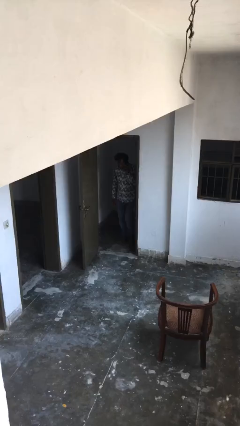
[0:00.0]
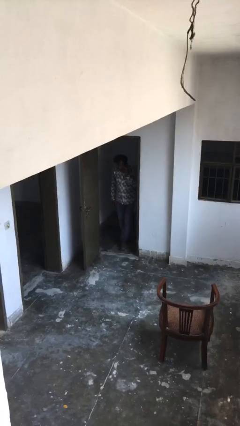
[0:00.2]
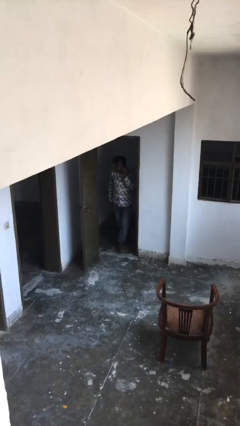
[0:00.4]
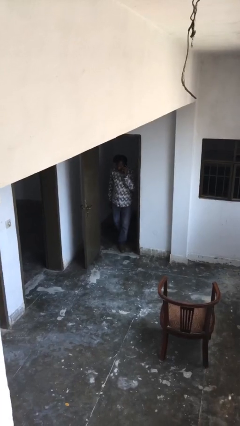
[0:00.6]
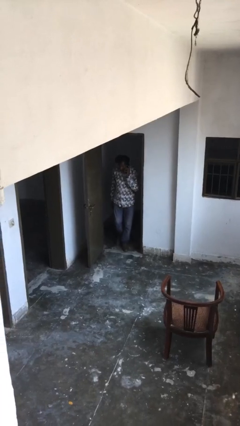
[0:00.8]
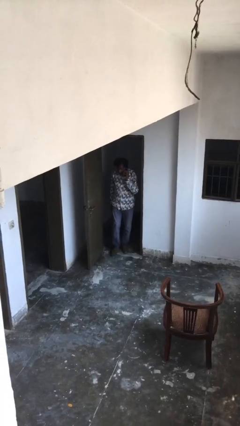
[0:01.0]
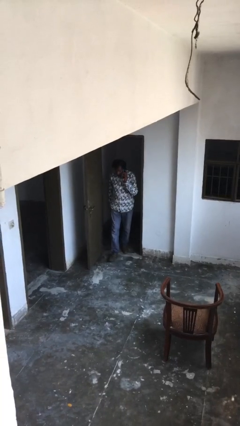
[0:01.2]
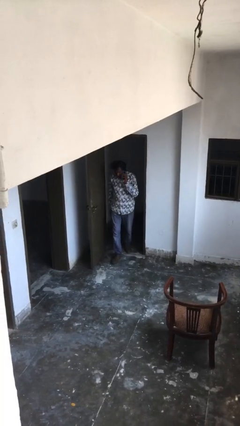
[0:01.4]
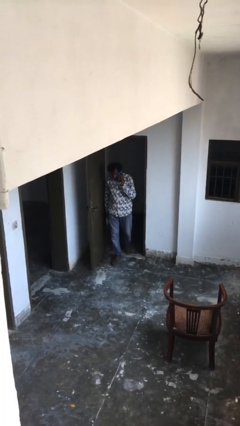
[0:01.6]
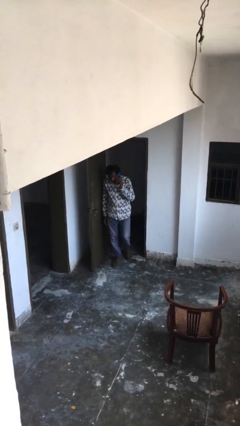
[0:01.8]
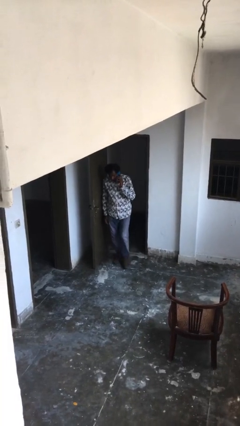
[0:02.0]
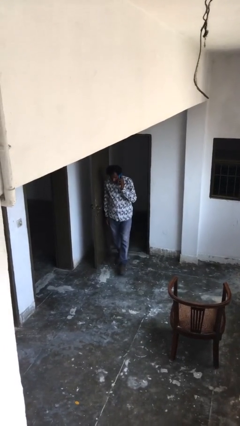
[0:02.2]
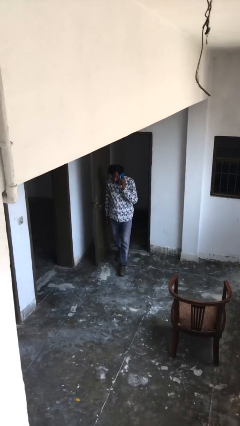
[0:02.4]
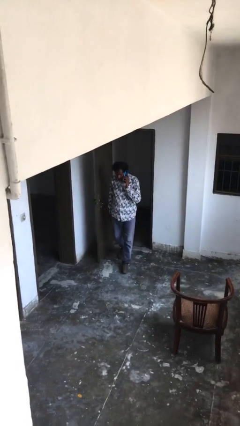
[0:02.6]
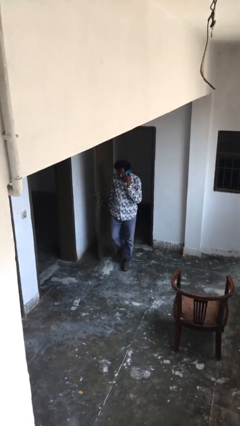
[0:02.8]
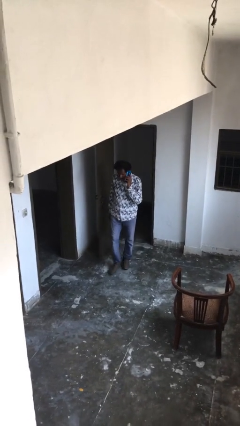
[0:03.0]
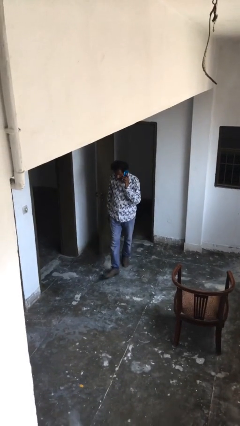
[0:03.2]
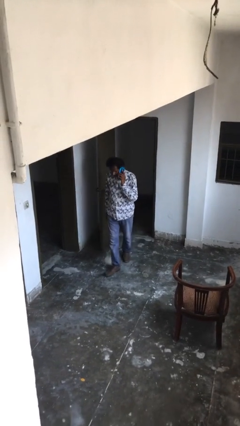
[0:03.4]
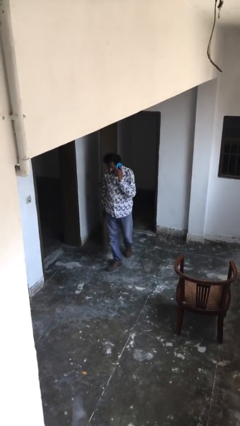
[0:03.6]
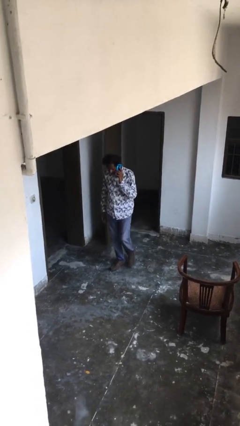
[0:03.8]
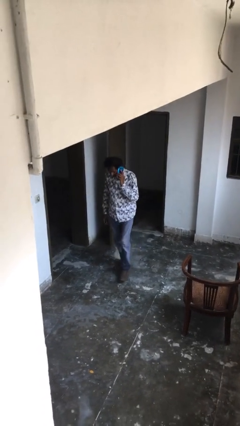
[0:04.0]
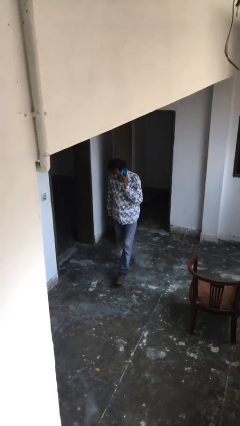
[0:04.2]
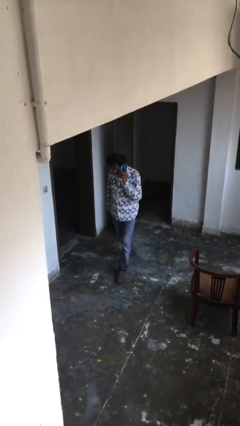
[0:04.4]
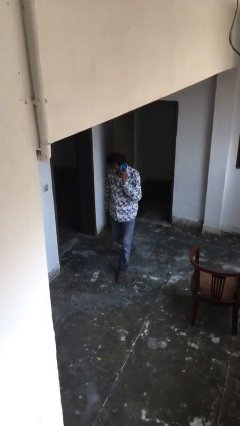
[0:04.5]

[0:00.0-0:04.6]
person enters scene through structure

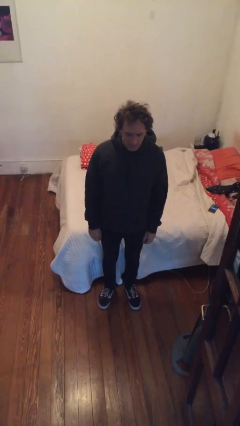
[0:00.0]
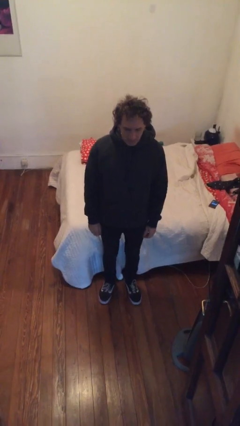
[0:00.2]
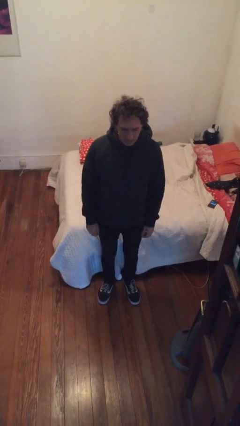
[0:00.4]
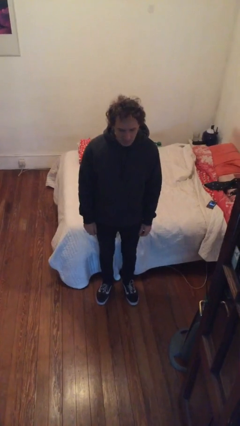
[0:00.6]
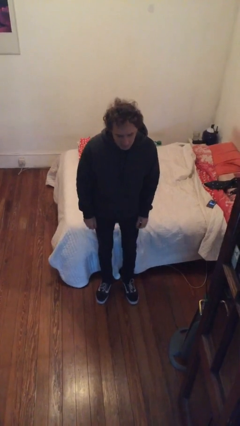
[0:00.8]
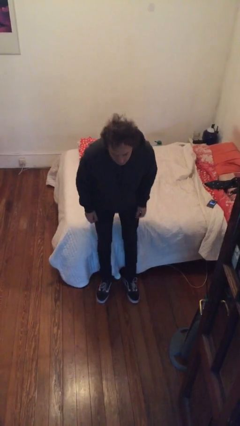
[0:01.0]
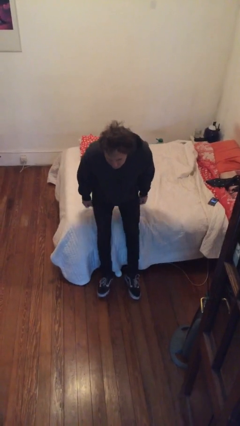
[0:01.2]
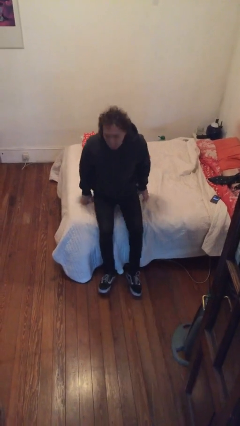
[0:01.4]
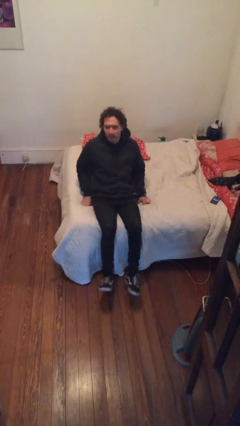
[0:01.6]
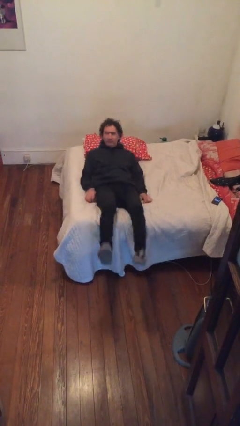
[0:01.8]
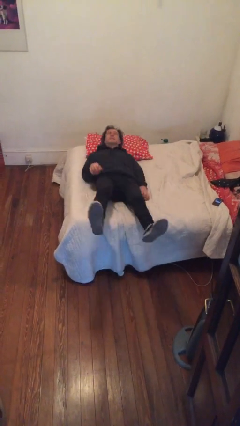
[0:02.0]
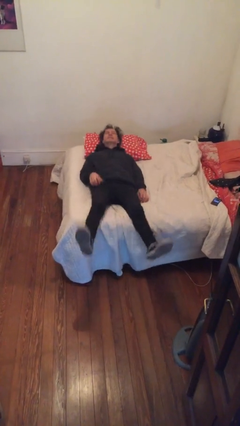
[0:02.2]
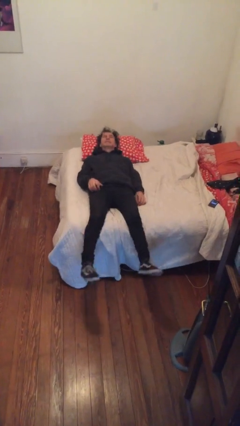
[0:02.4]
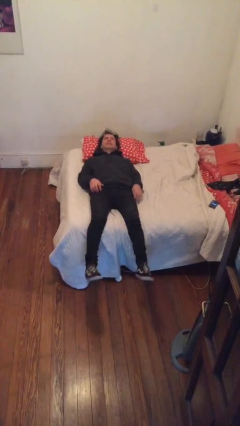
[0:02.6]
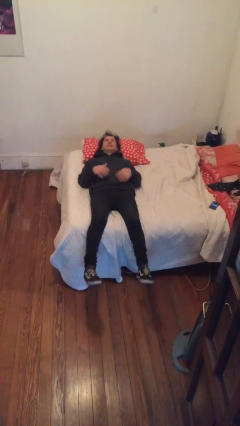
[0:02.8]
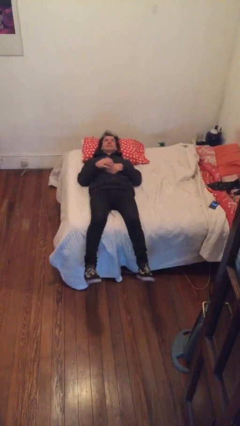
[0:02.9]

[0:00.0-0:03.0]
person lies down on bed

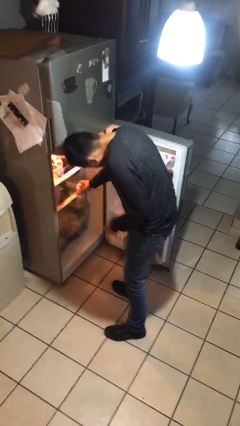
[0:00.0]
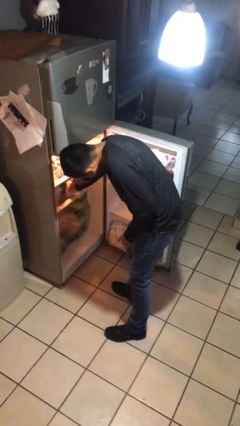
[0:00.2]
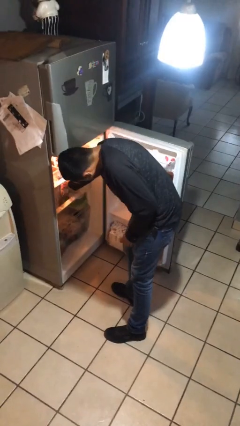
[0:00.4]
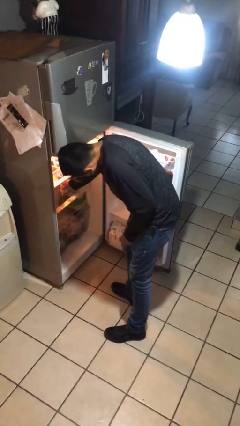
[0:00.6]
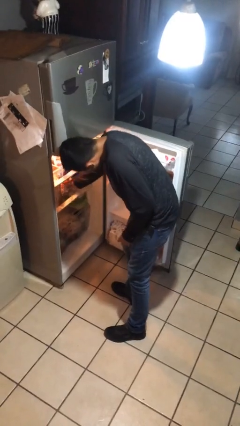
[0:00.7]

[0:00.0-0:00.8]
person takes object from refrigerator

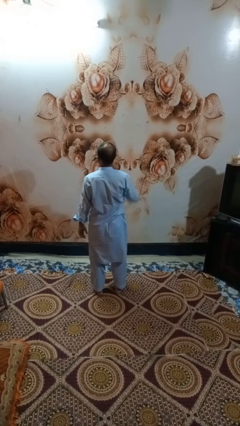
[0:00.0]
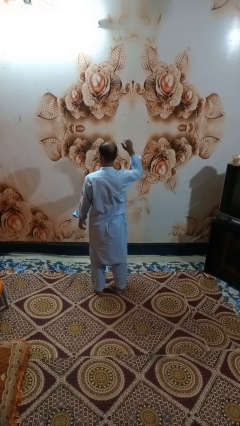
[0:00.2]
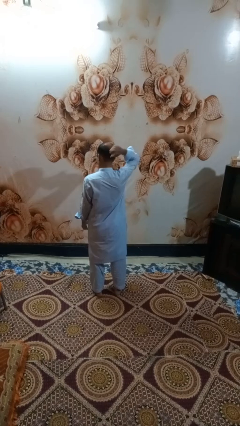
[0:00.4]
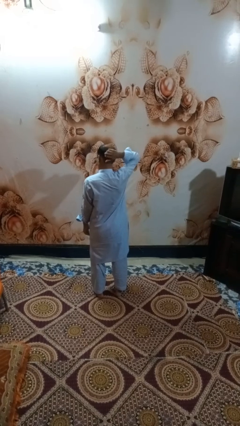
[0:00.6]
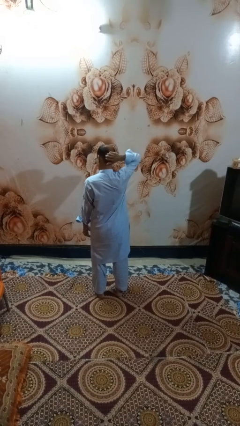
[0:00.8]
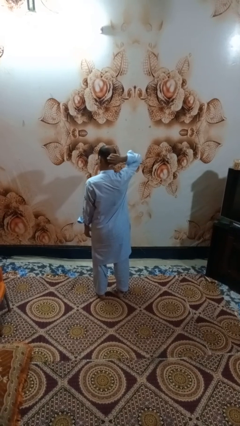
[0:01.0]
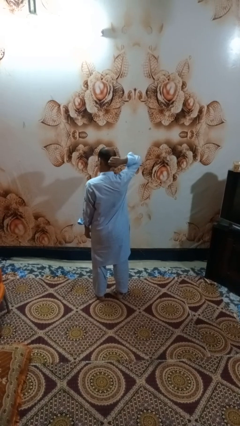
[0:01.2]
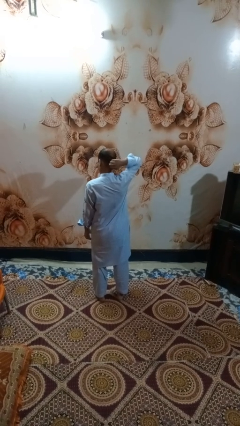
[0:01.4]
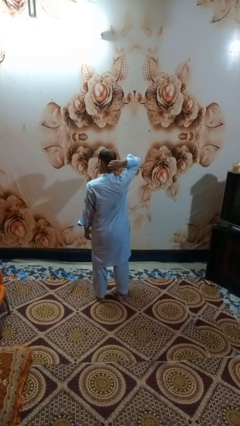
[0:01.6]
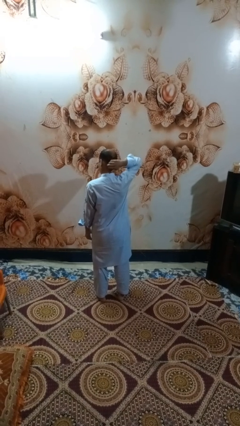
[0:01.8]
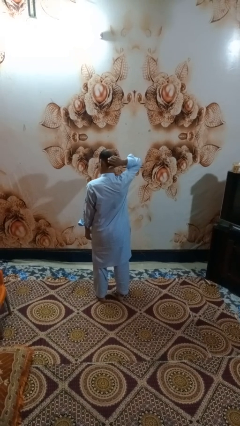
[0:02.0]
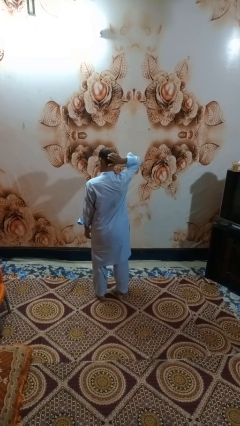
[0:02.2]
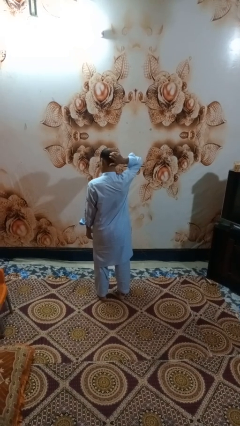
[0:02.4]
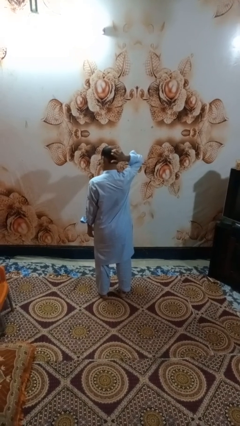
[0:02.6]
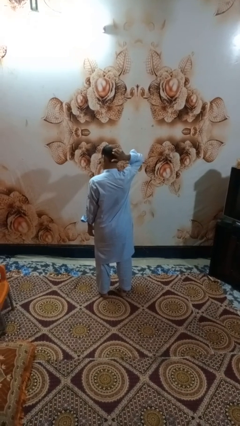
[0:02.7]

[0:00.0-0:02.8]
person scratches face

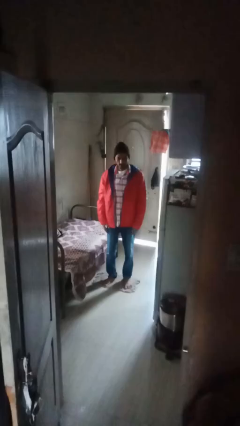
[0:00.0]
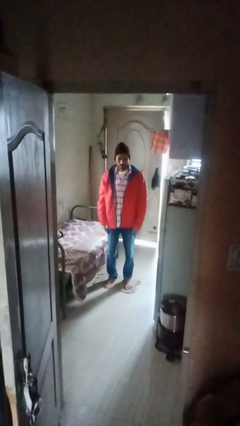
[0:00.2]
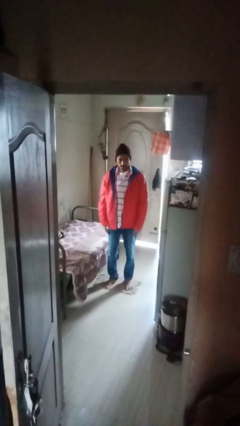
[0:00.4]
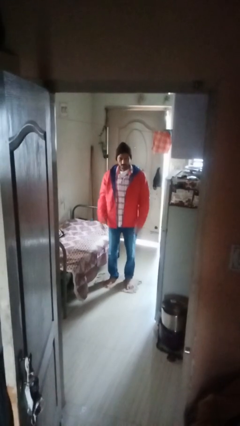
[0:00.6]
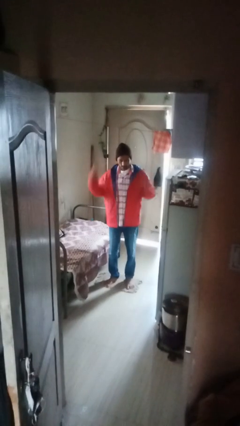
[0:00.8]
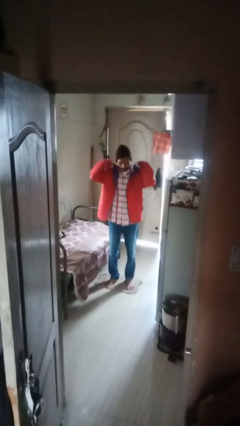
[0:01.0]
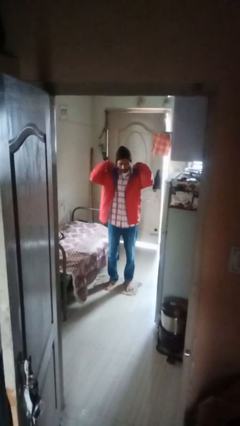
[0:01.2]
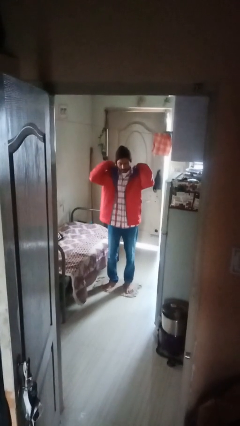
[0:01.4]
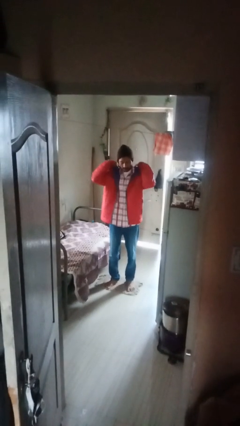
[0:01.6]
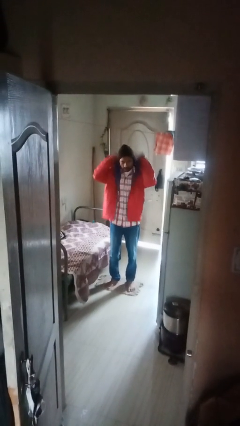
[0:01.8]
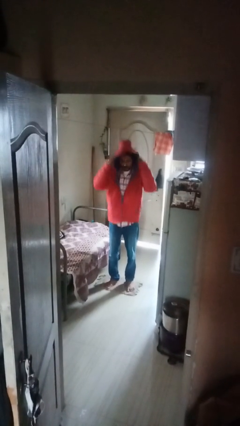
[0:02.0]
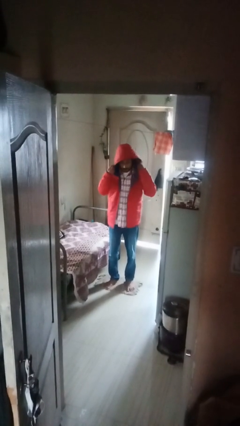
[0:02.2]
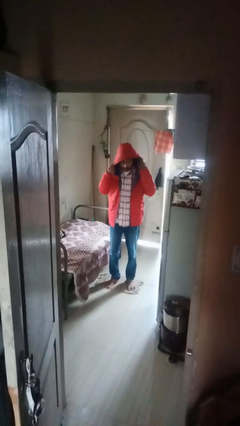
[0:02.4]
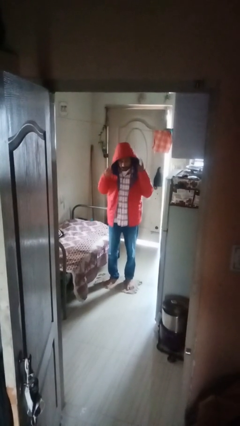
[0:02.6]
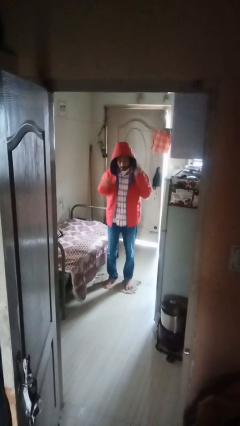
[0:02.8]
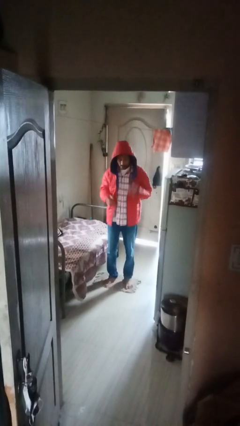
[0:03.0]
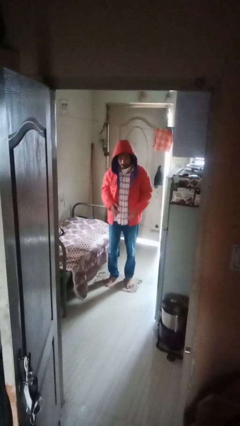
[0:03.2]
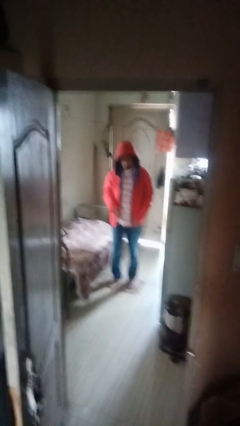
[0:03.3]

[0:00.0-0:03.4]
person puts on hoodie

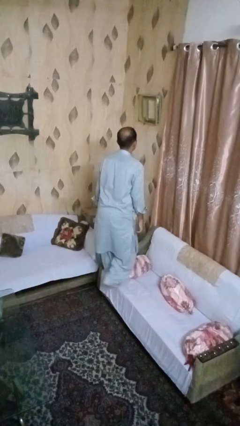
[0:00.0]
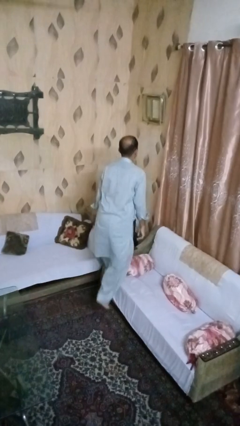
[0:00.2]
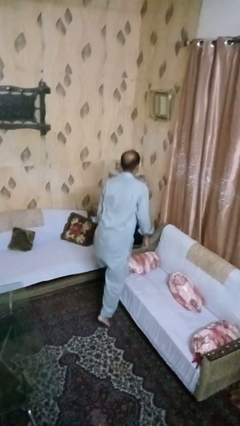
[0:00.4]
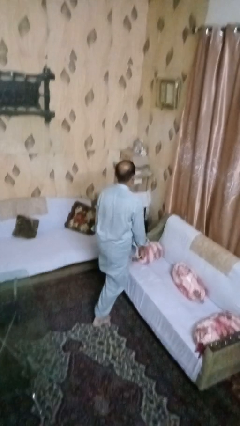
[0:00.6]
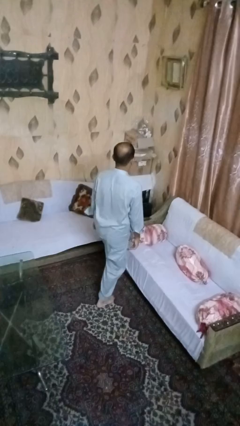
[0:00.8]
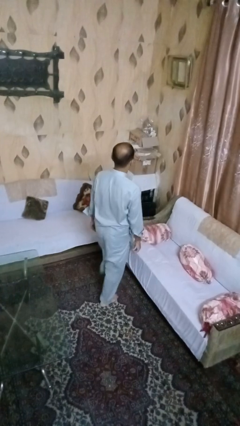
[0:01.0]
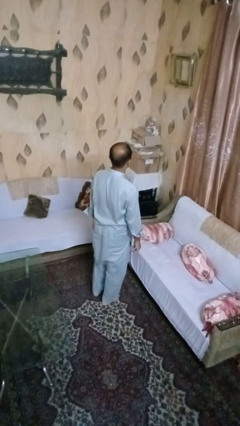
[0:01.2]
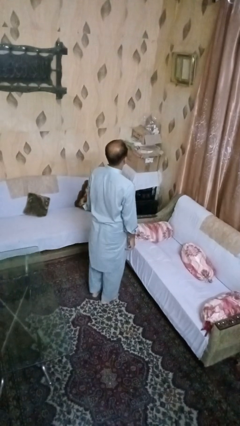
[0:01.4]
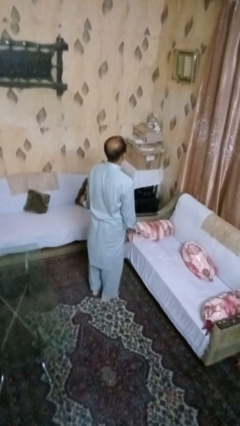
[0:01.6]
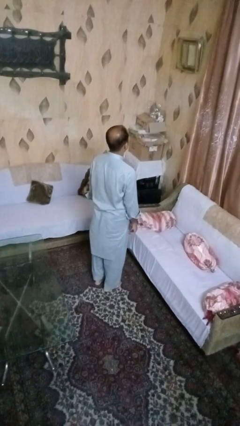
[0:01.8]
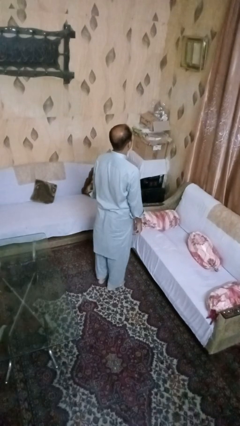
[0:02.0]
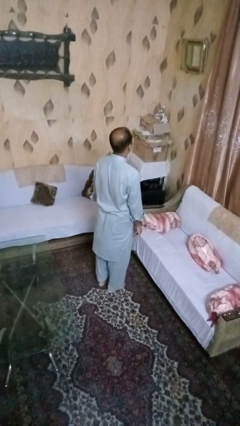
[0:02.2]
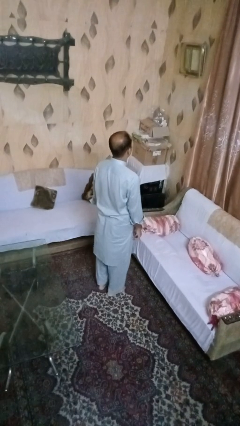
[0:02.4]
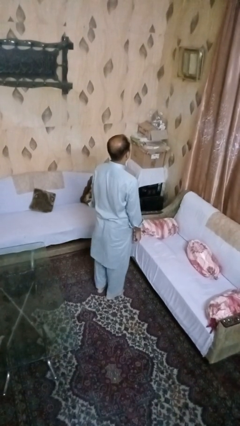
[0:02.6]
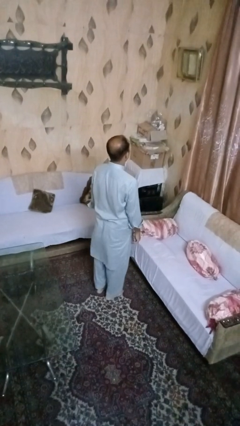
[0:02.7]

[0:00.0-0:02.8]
person climbs off couch
